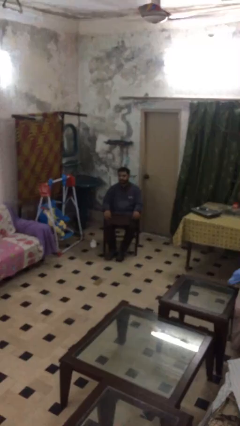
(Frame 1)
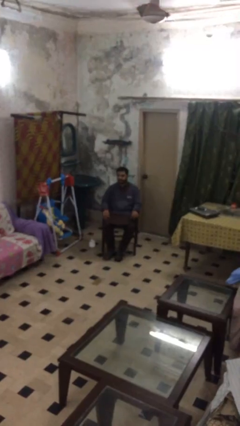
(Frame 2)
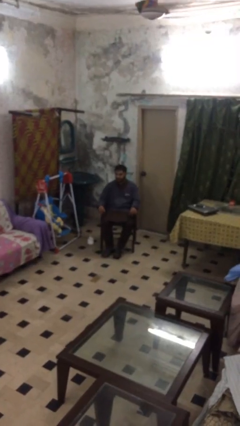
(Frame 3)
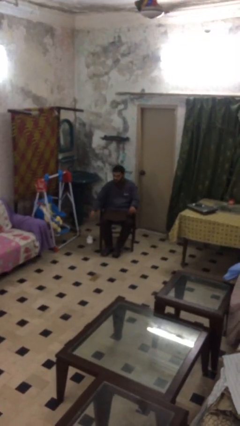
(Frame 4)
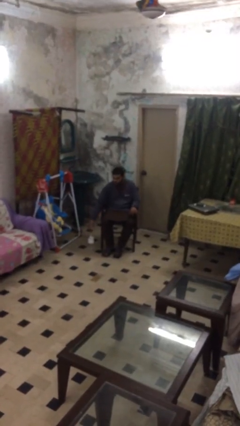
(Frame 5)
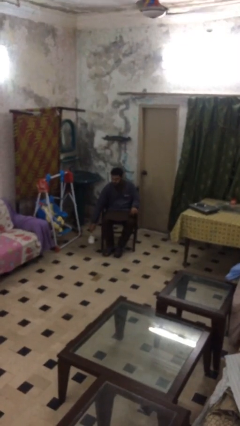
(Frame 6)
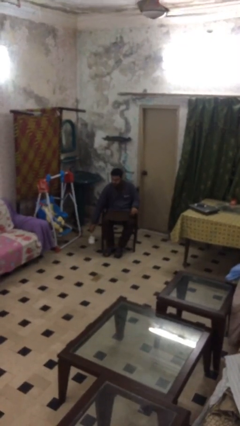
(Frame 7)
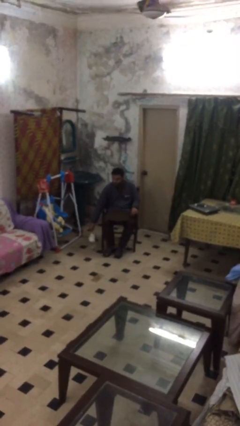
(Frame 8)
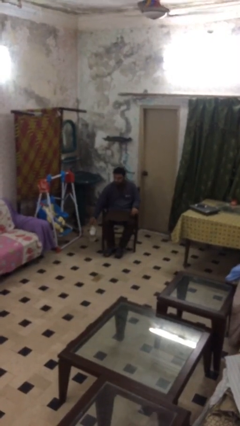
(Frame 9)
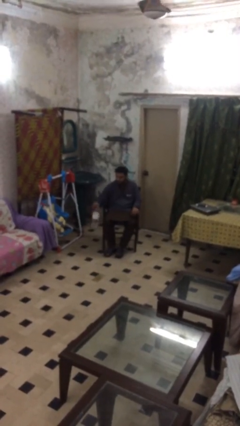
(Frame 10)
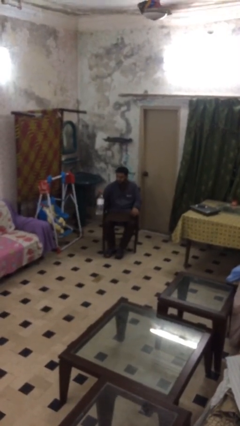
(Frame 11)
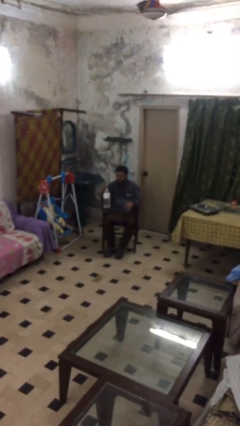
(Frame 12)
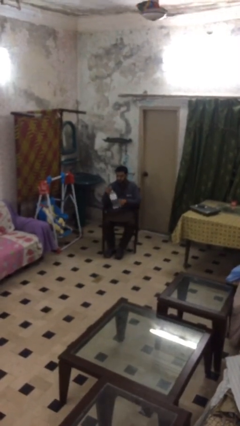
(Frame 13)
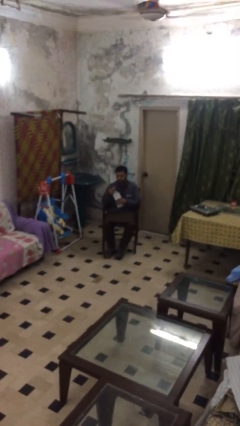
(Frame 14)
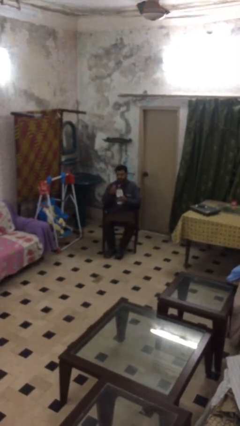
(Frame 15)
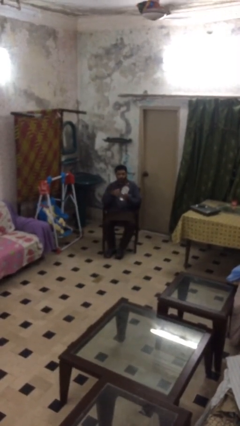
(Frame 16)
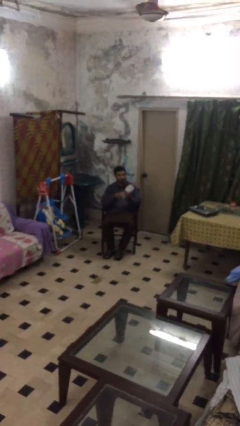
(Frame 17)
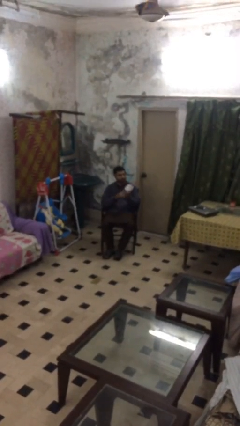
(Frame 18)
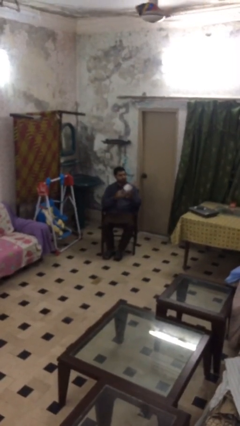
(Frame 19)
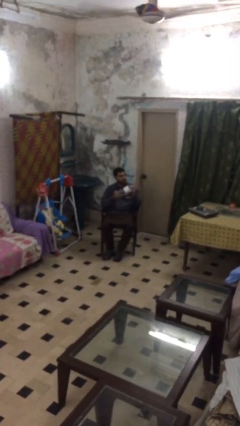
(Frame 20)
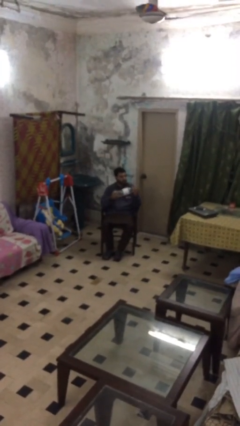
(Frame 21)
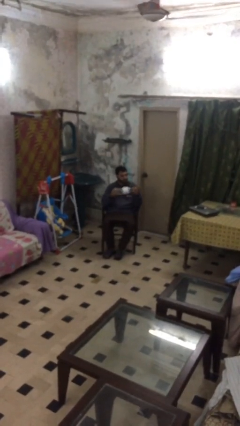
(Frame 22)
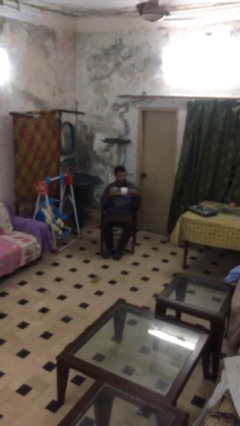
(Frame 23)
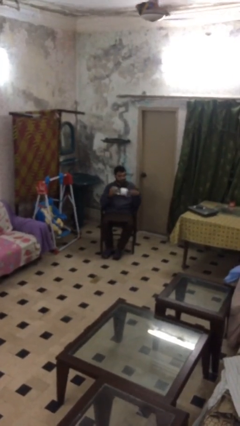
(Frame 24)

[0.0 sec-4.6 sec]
person picks up object from floor

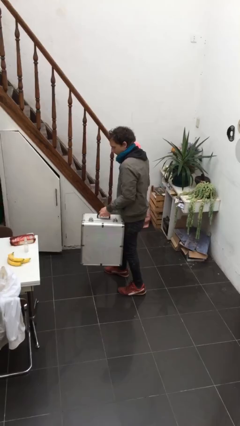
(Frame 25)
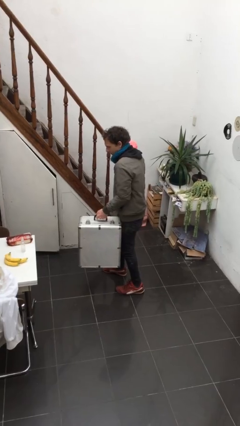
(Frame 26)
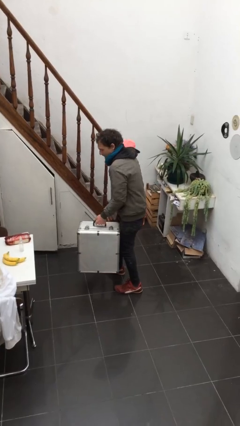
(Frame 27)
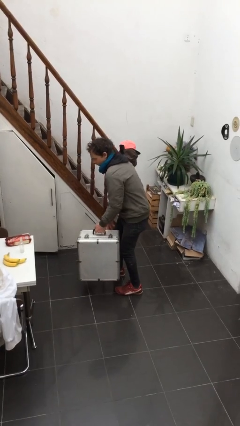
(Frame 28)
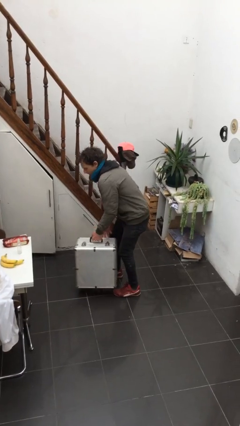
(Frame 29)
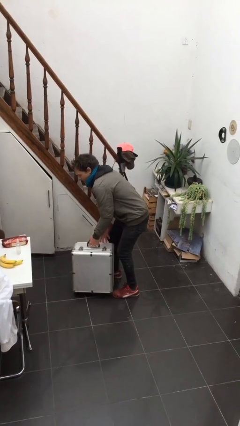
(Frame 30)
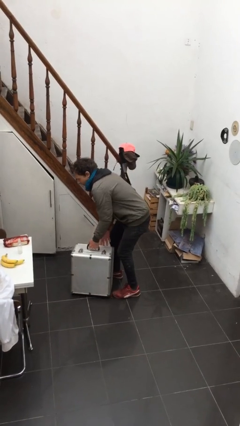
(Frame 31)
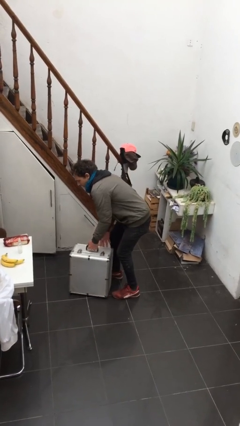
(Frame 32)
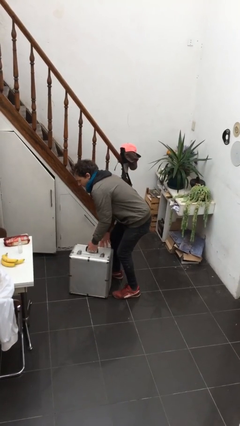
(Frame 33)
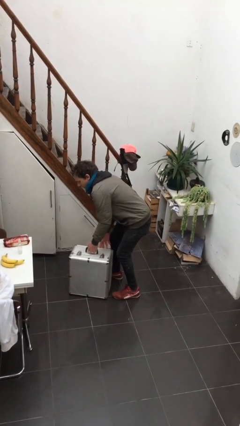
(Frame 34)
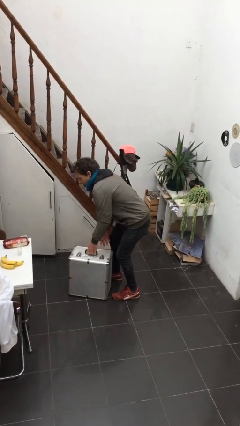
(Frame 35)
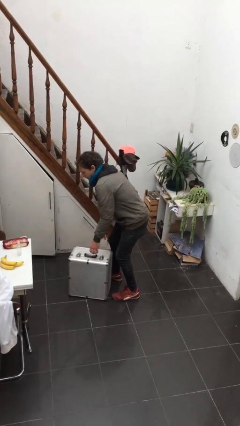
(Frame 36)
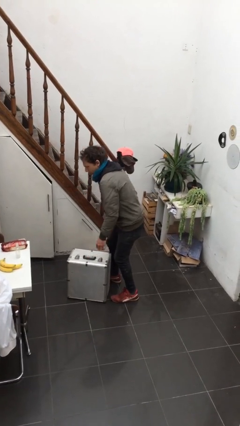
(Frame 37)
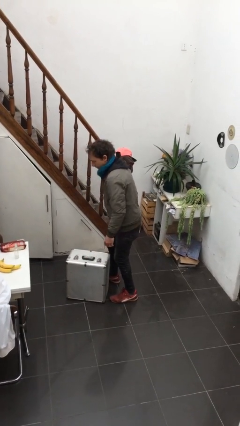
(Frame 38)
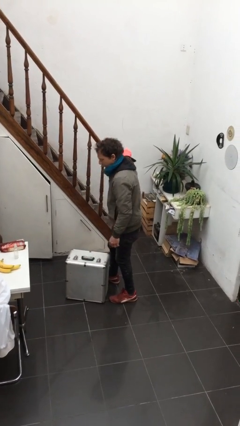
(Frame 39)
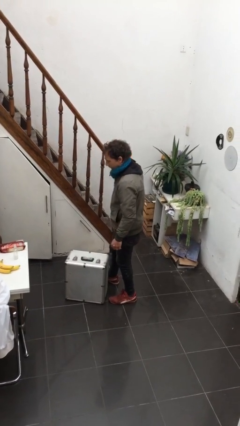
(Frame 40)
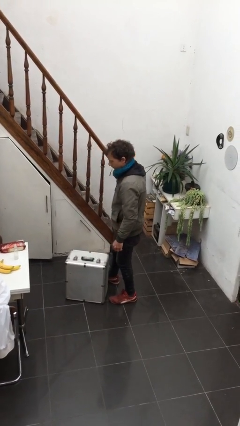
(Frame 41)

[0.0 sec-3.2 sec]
person puts down object on floor

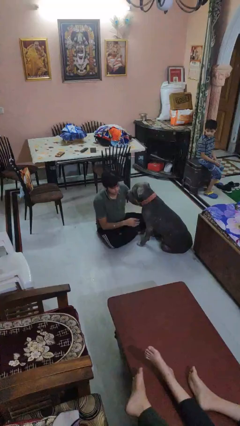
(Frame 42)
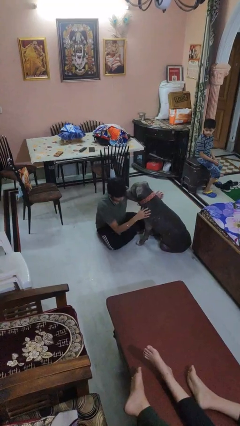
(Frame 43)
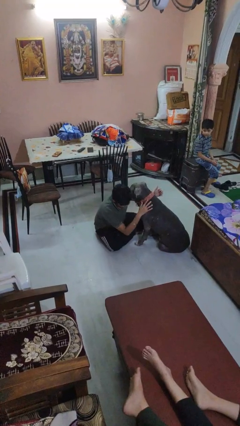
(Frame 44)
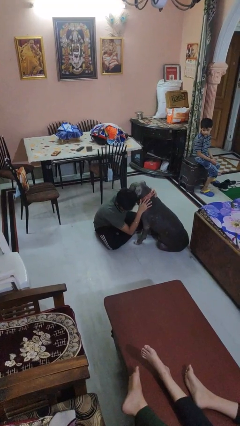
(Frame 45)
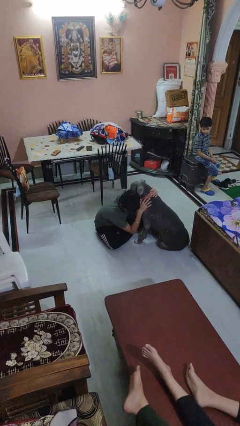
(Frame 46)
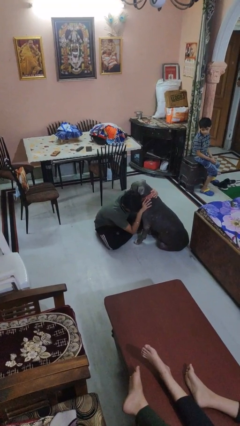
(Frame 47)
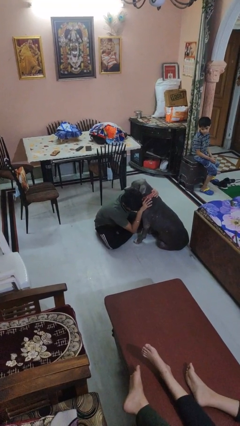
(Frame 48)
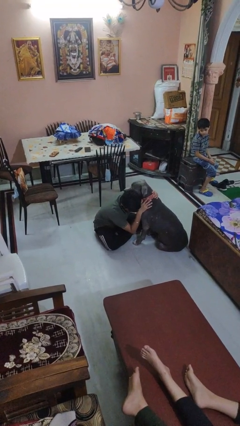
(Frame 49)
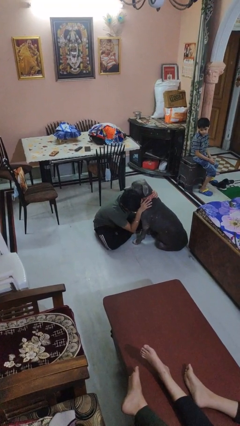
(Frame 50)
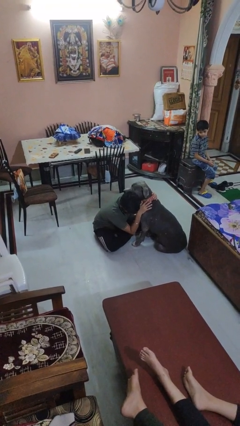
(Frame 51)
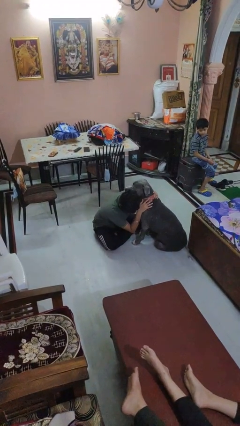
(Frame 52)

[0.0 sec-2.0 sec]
person hugs dog

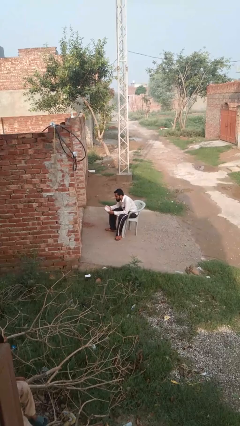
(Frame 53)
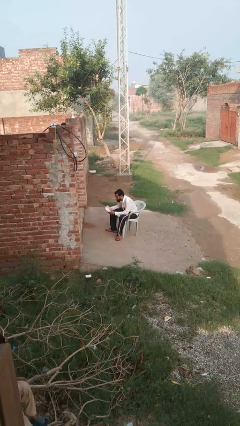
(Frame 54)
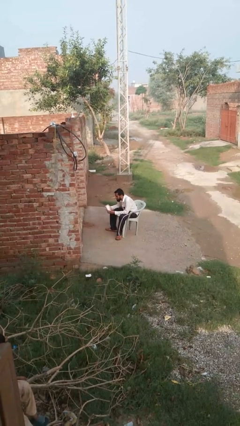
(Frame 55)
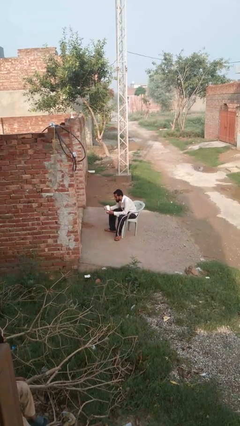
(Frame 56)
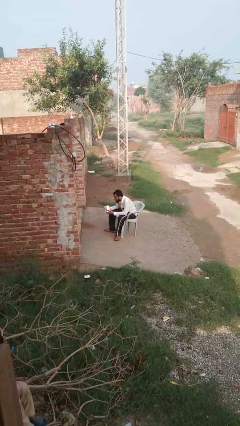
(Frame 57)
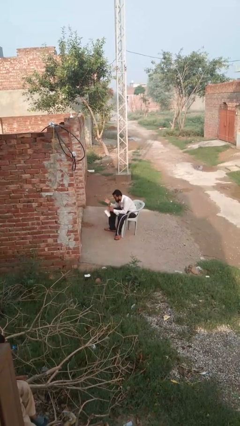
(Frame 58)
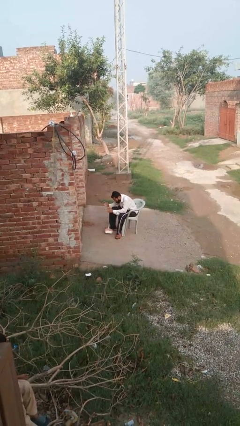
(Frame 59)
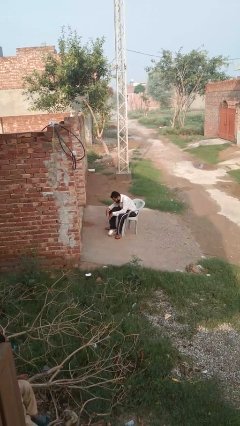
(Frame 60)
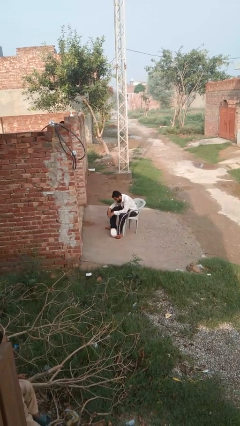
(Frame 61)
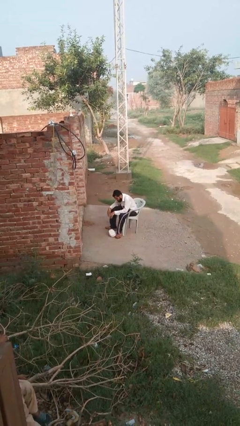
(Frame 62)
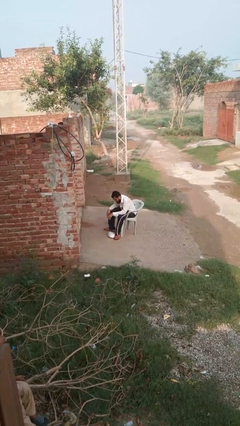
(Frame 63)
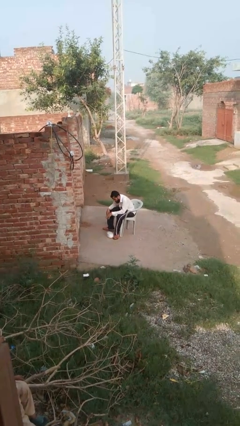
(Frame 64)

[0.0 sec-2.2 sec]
person drops object

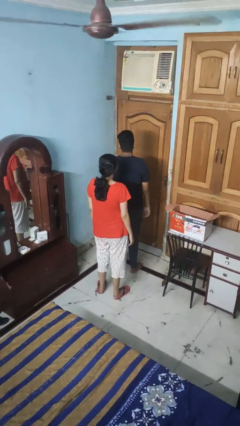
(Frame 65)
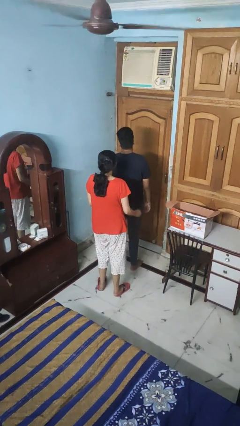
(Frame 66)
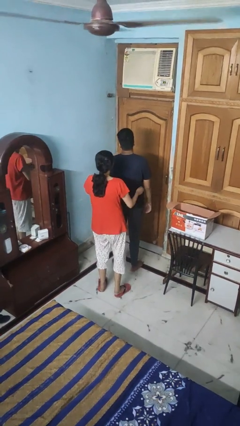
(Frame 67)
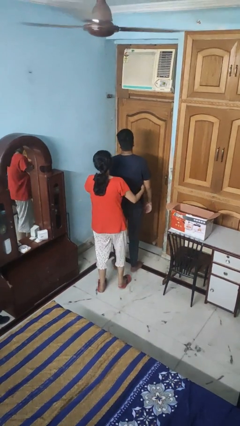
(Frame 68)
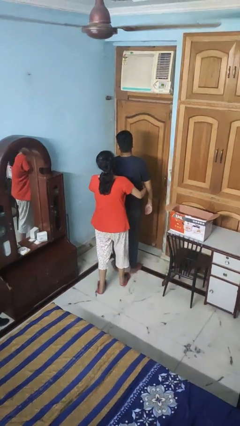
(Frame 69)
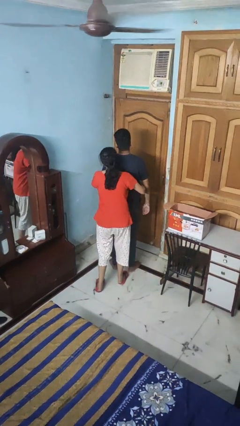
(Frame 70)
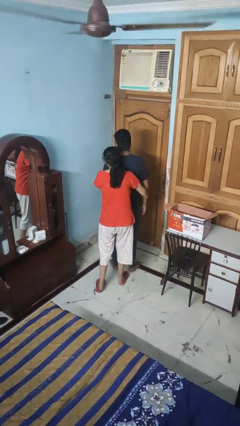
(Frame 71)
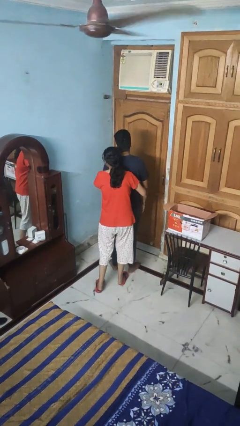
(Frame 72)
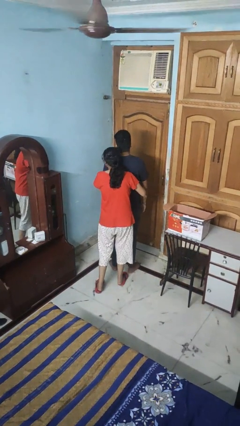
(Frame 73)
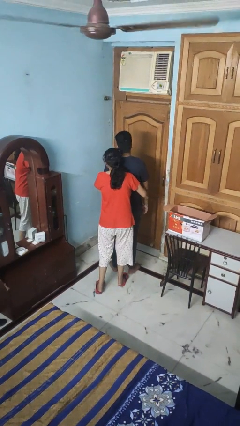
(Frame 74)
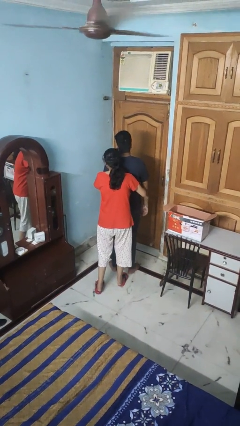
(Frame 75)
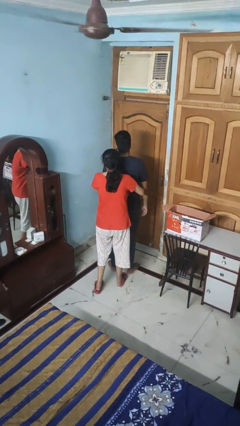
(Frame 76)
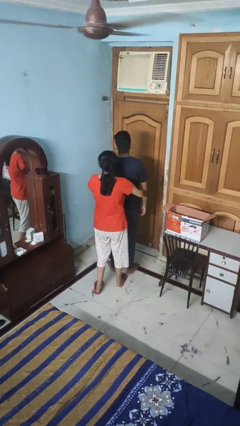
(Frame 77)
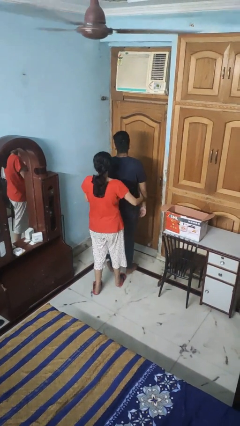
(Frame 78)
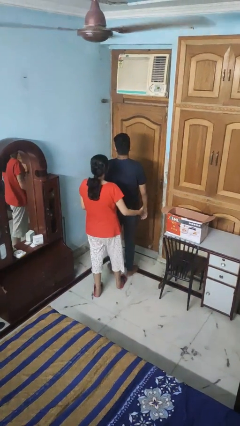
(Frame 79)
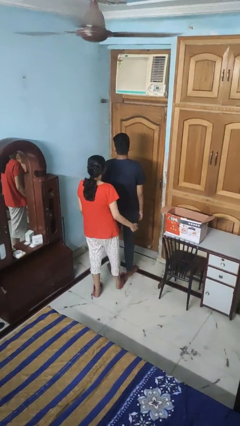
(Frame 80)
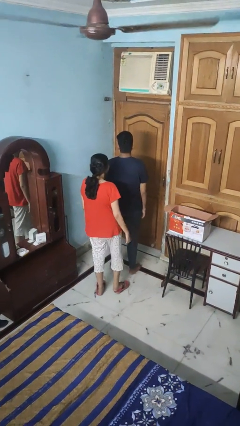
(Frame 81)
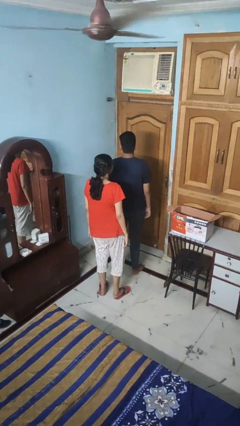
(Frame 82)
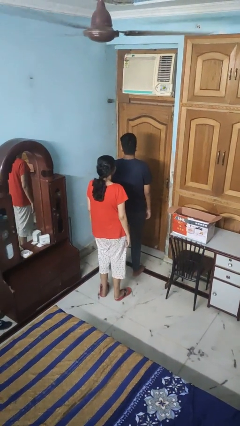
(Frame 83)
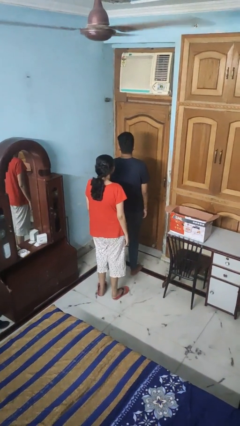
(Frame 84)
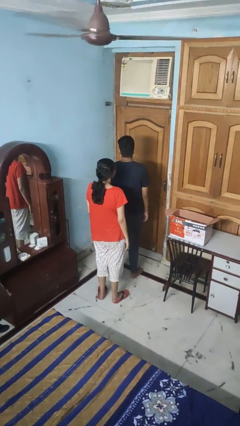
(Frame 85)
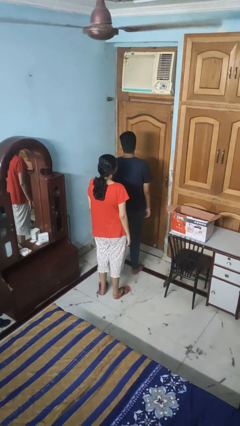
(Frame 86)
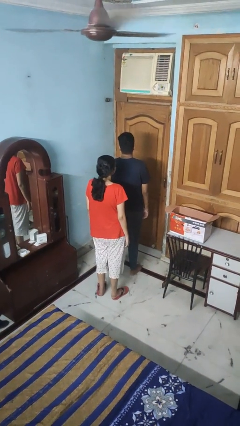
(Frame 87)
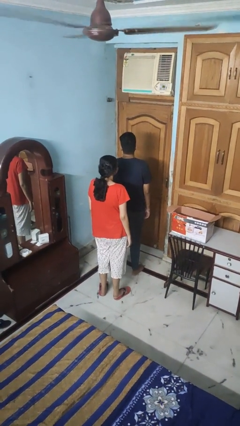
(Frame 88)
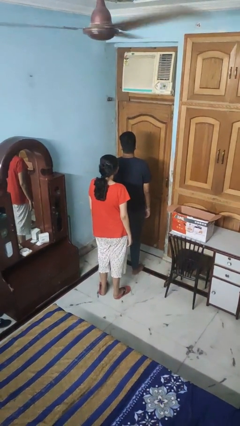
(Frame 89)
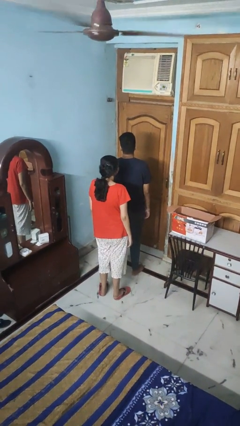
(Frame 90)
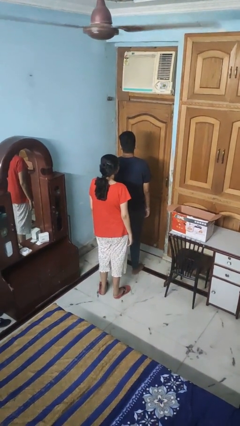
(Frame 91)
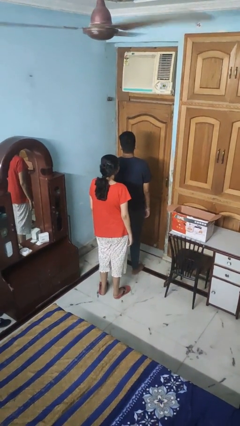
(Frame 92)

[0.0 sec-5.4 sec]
person hugs person from behind
